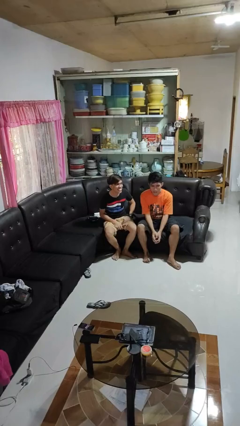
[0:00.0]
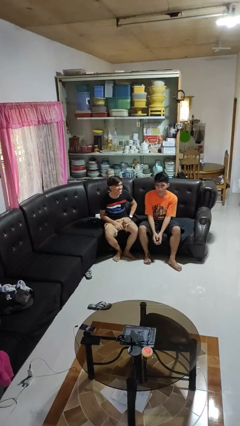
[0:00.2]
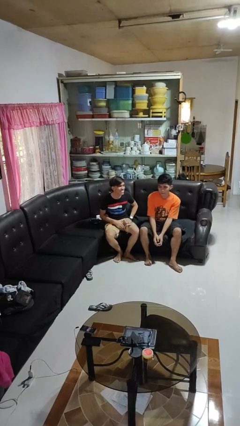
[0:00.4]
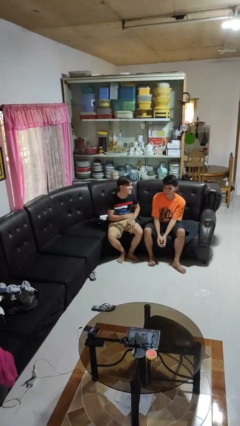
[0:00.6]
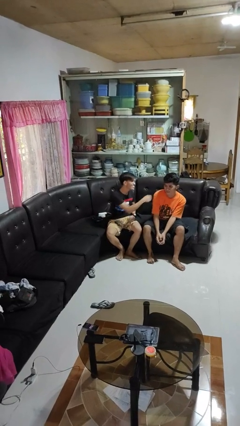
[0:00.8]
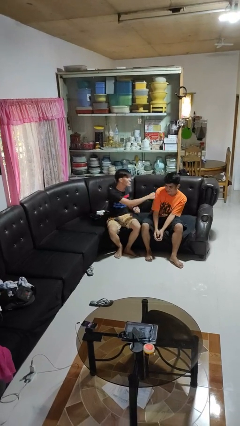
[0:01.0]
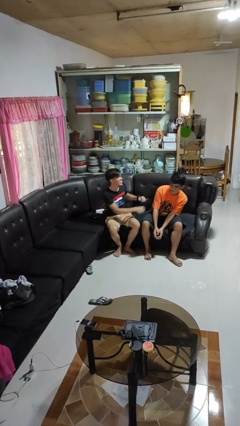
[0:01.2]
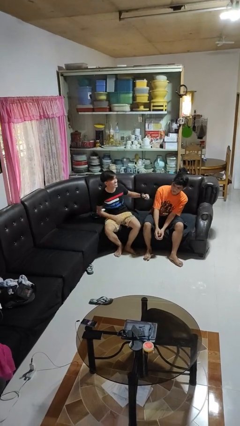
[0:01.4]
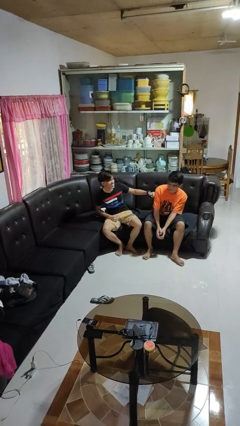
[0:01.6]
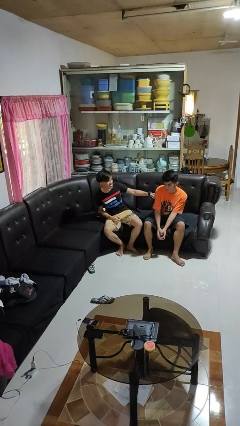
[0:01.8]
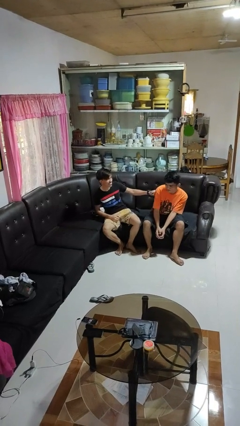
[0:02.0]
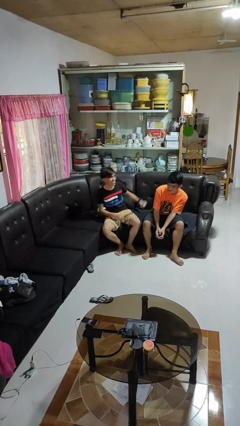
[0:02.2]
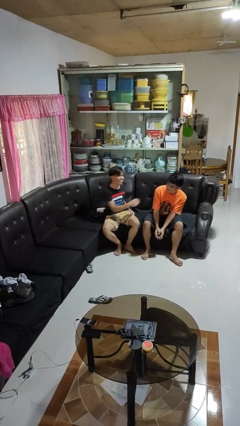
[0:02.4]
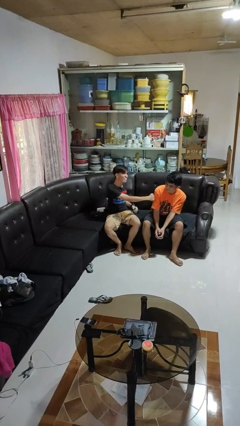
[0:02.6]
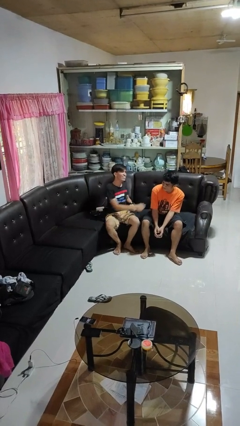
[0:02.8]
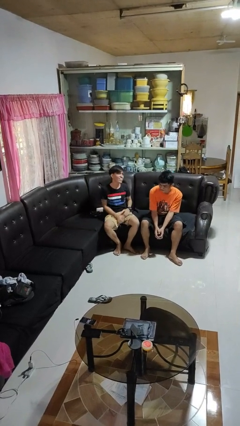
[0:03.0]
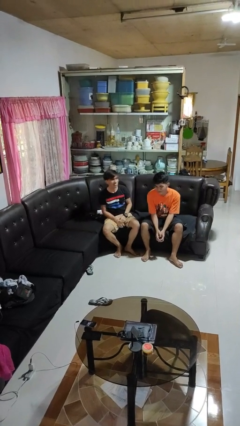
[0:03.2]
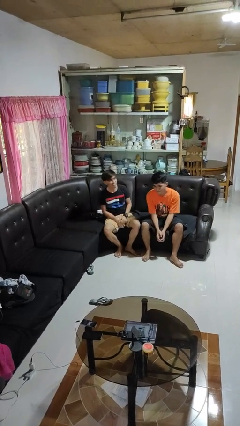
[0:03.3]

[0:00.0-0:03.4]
person pounds shoulders of person

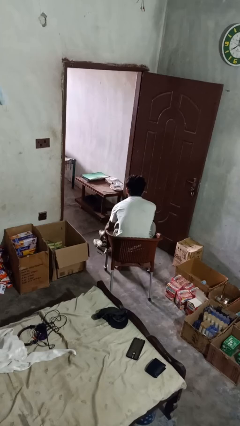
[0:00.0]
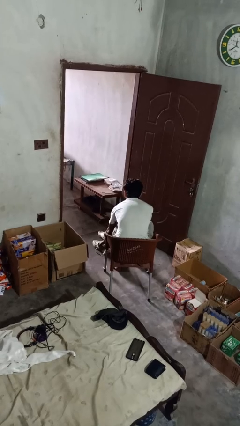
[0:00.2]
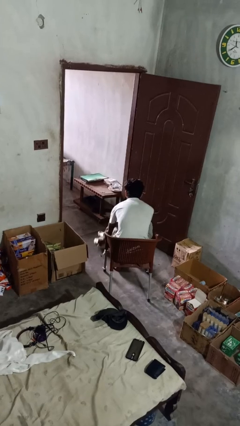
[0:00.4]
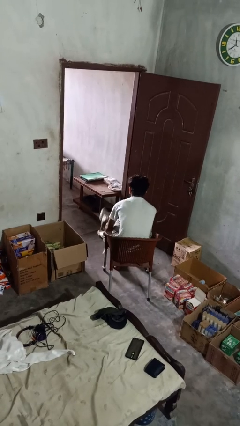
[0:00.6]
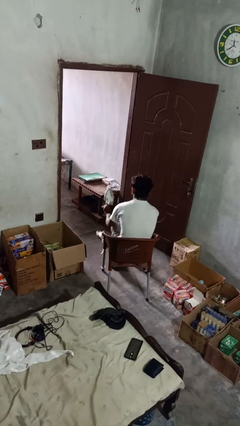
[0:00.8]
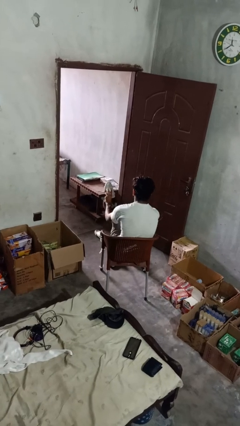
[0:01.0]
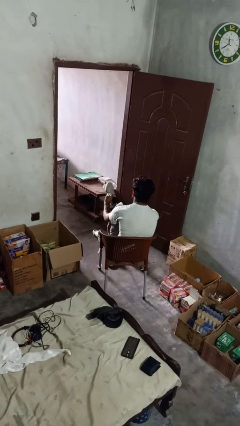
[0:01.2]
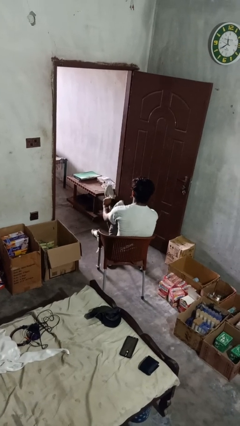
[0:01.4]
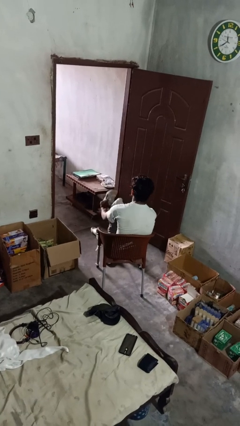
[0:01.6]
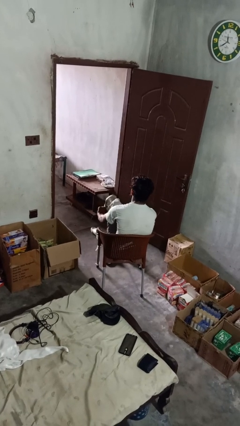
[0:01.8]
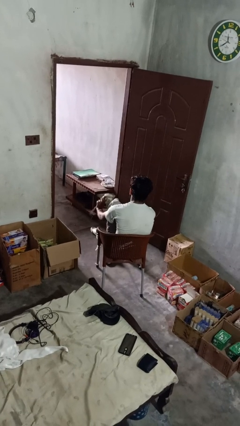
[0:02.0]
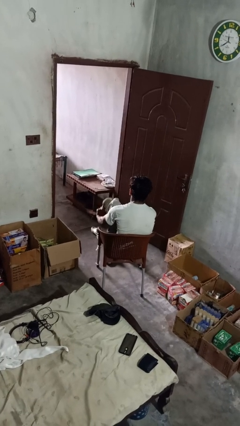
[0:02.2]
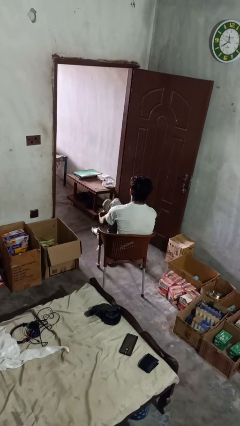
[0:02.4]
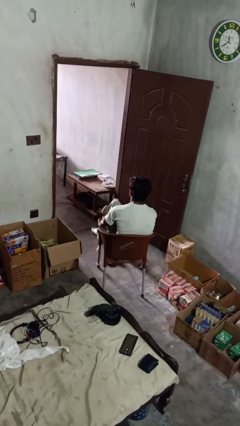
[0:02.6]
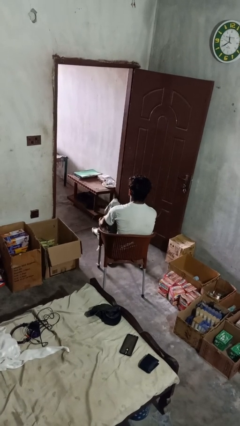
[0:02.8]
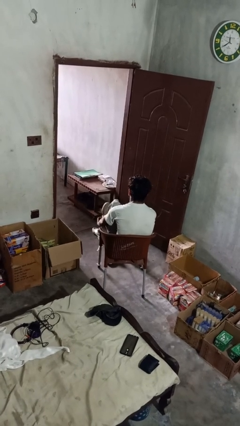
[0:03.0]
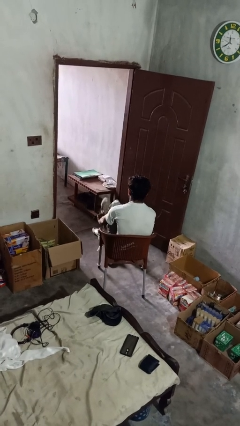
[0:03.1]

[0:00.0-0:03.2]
person puts on shoes

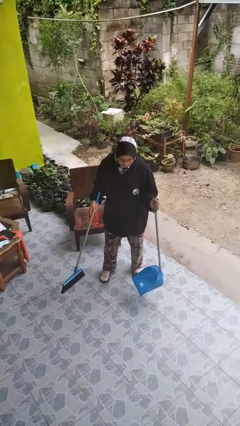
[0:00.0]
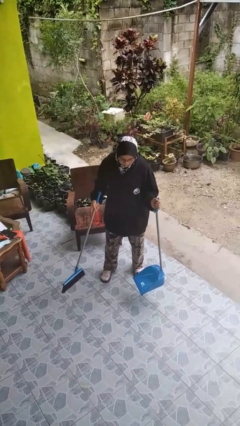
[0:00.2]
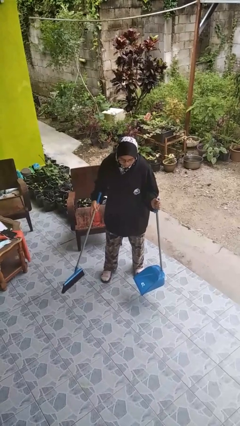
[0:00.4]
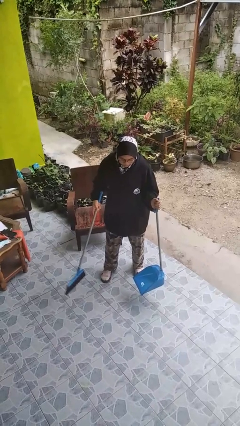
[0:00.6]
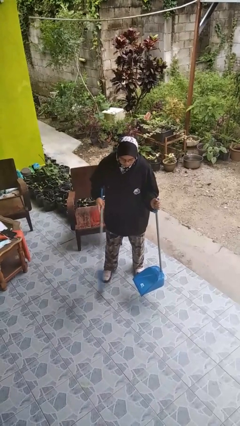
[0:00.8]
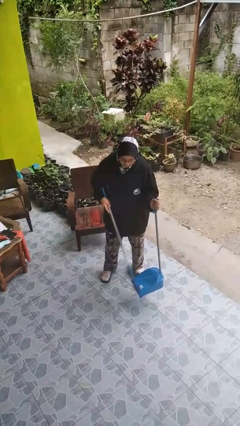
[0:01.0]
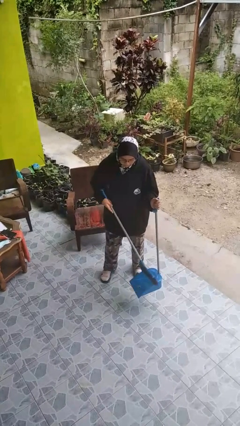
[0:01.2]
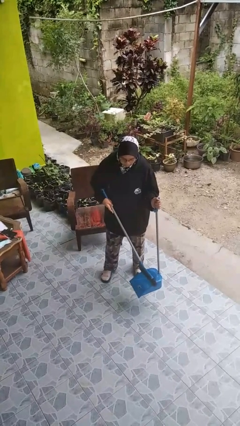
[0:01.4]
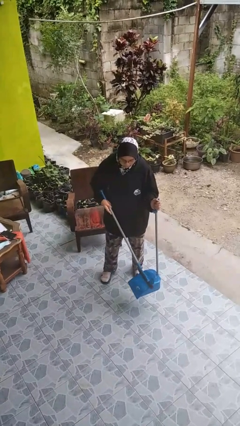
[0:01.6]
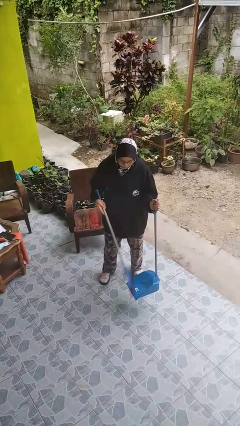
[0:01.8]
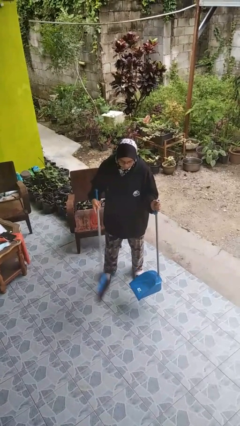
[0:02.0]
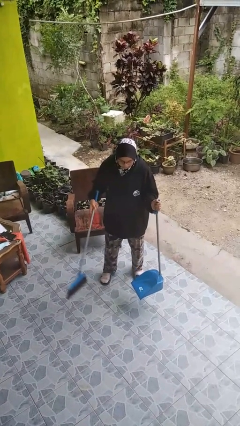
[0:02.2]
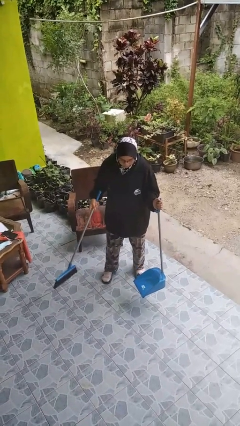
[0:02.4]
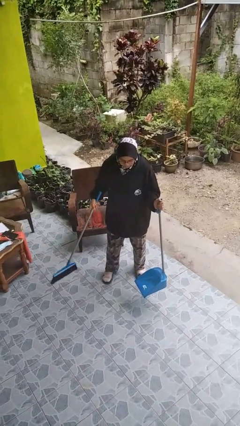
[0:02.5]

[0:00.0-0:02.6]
person sweeps floor

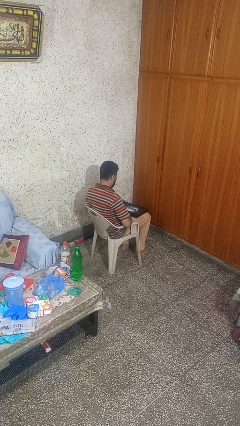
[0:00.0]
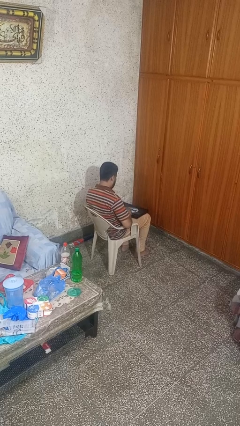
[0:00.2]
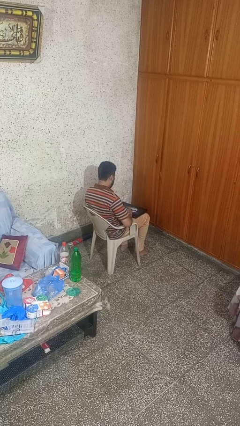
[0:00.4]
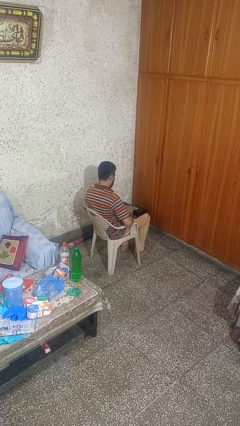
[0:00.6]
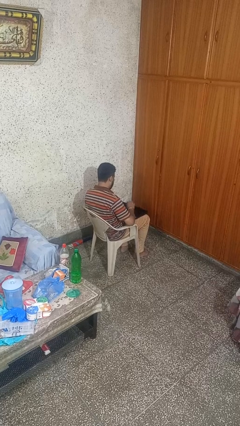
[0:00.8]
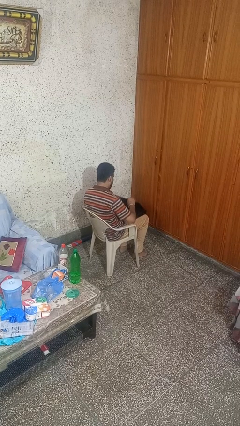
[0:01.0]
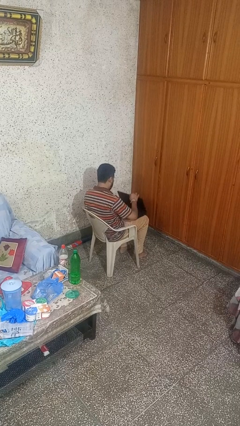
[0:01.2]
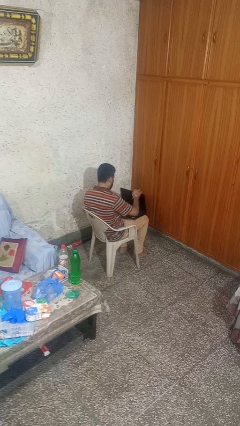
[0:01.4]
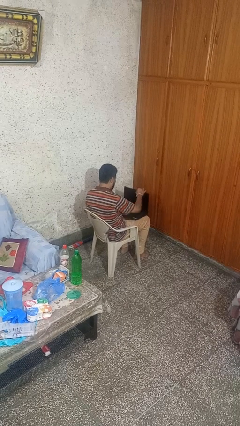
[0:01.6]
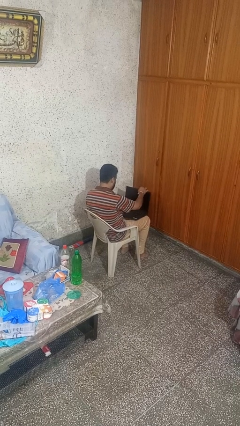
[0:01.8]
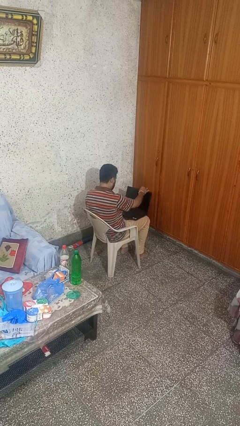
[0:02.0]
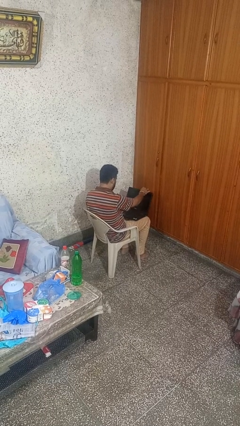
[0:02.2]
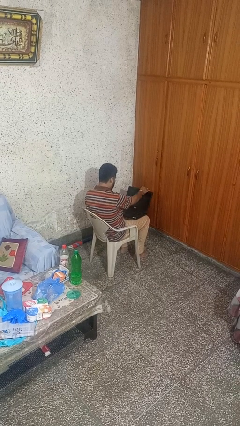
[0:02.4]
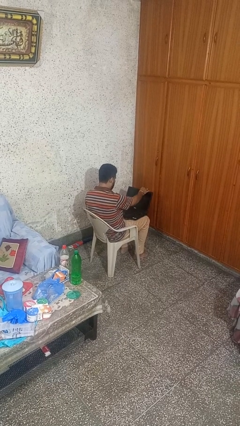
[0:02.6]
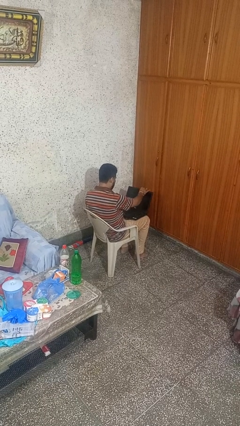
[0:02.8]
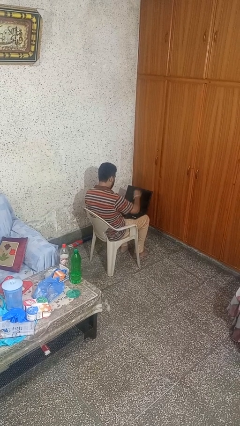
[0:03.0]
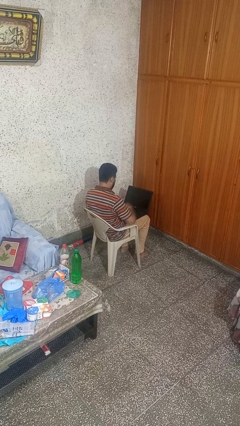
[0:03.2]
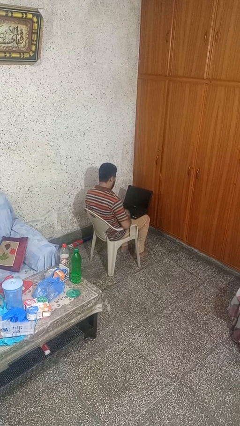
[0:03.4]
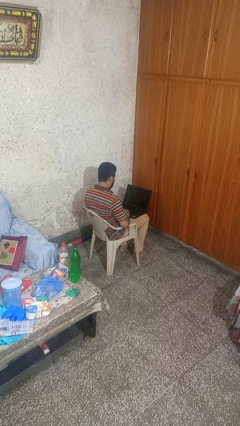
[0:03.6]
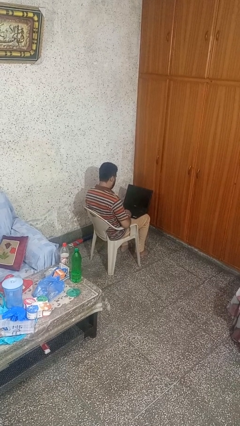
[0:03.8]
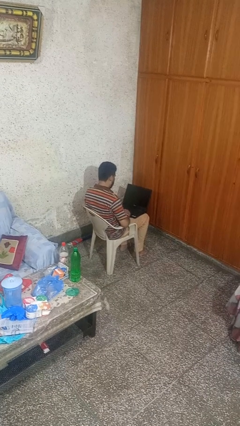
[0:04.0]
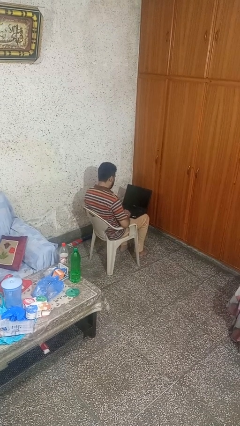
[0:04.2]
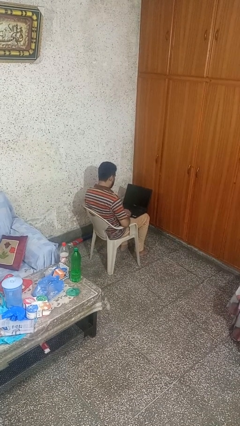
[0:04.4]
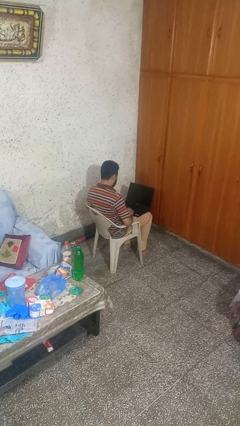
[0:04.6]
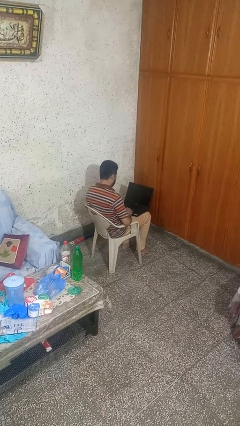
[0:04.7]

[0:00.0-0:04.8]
person opens laptop

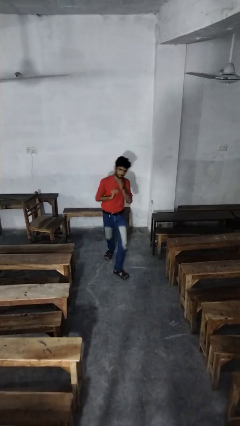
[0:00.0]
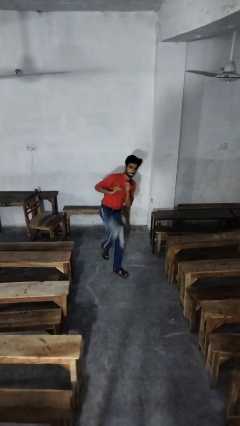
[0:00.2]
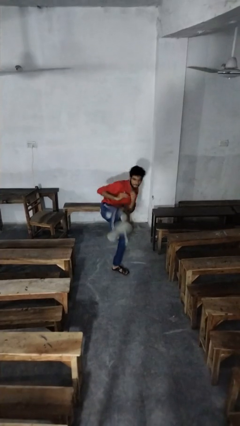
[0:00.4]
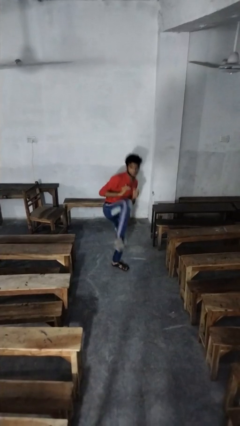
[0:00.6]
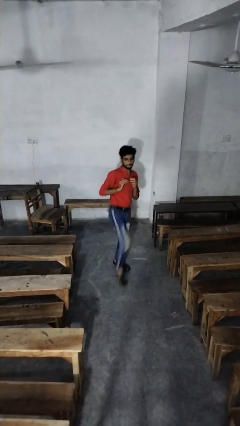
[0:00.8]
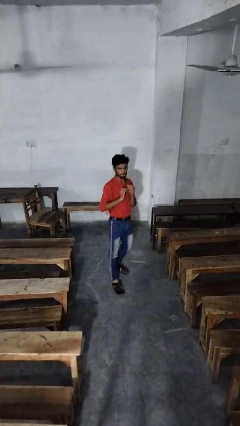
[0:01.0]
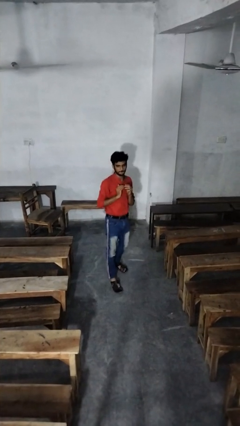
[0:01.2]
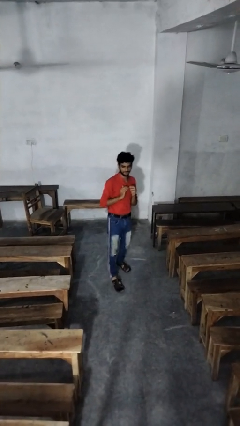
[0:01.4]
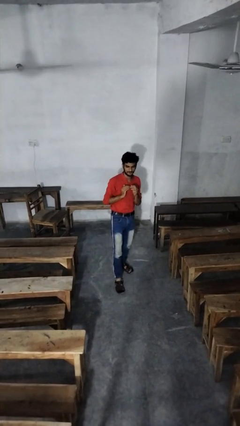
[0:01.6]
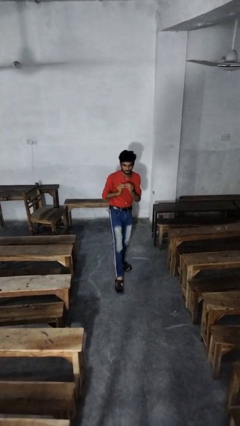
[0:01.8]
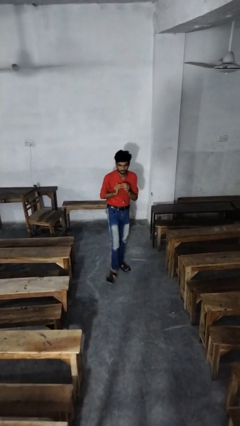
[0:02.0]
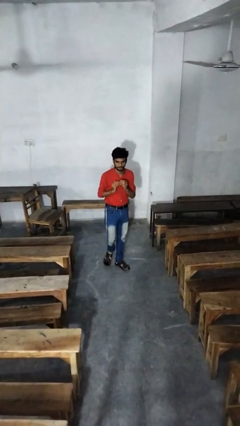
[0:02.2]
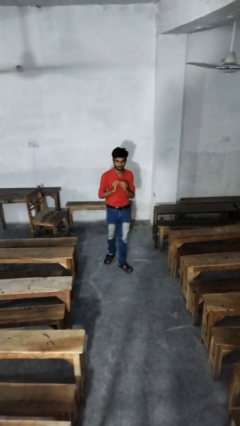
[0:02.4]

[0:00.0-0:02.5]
person karate kicks

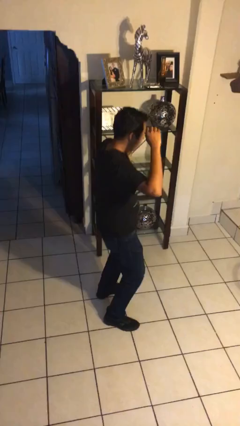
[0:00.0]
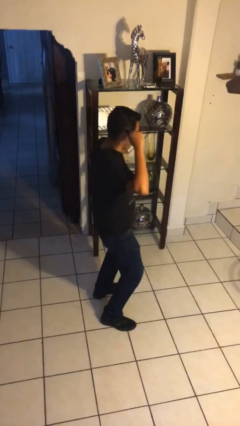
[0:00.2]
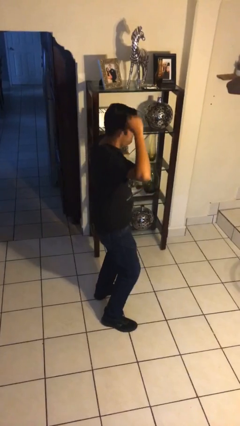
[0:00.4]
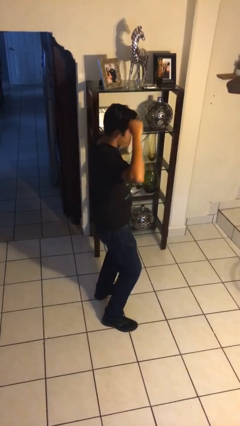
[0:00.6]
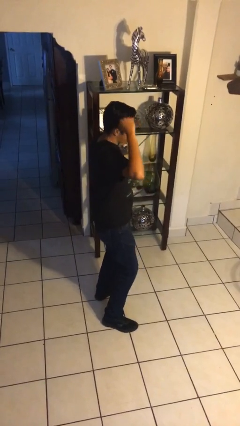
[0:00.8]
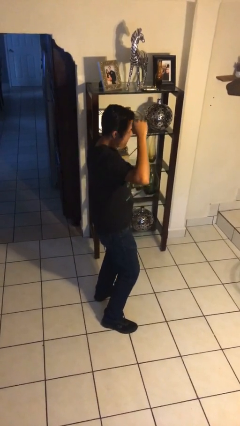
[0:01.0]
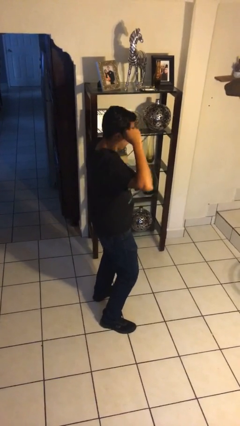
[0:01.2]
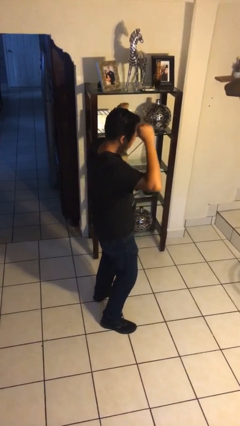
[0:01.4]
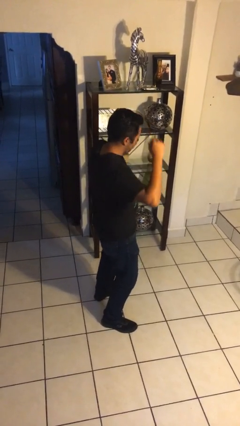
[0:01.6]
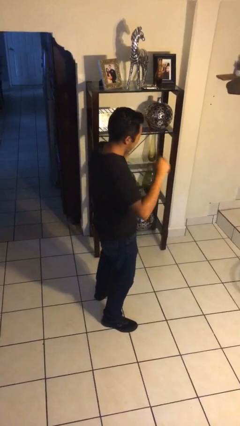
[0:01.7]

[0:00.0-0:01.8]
person dances in place
